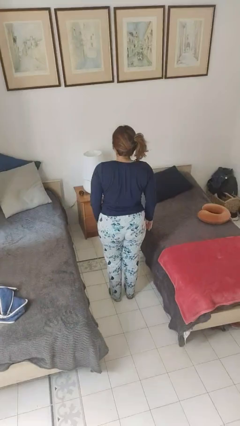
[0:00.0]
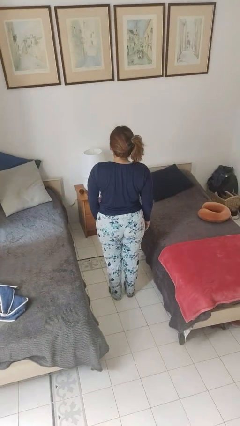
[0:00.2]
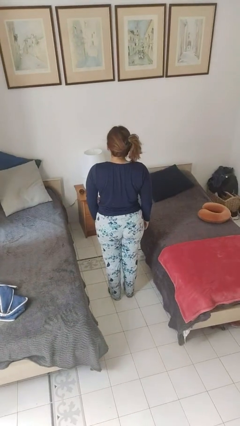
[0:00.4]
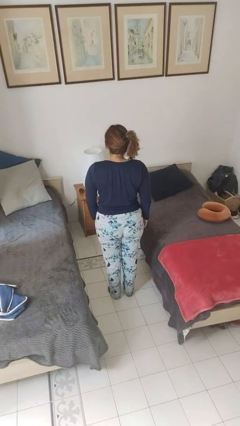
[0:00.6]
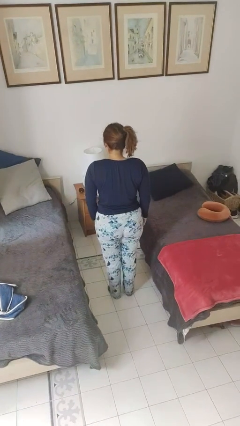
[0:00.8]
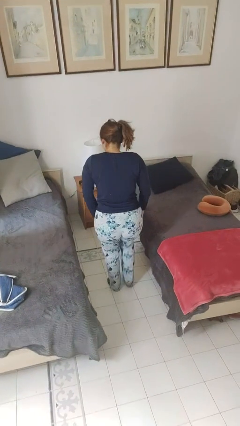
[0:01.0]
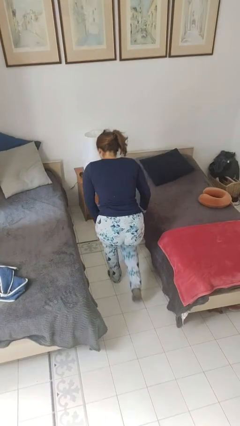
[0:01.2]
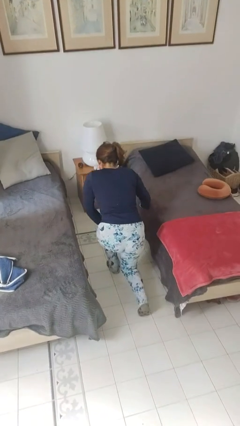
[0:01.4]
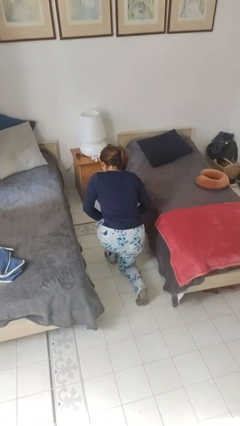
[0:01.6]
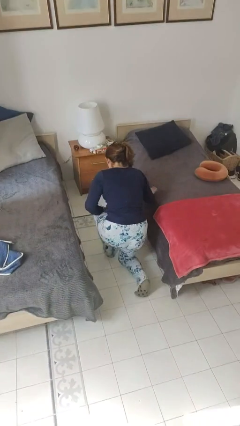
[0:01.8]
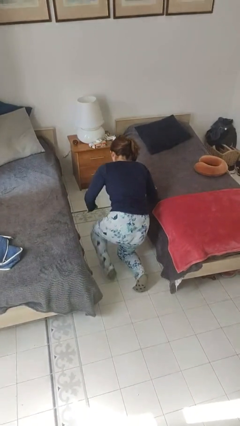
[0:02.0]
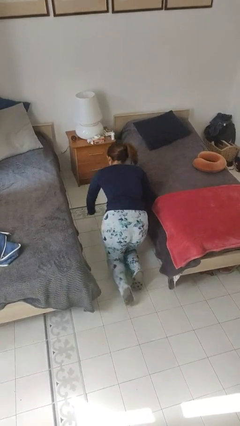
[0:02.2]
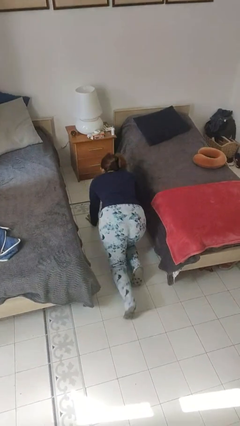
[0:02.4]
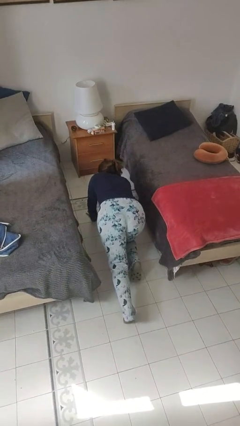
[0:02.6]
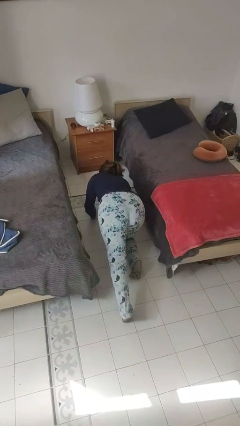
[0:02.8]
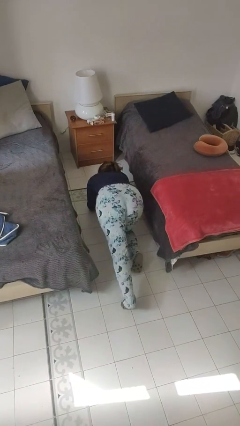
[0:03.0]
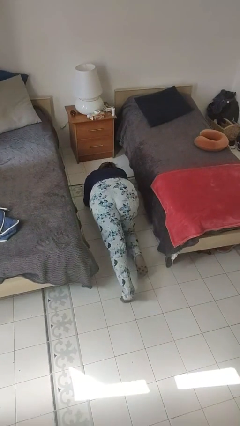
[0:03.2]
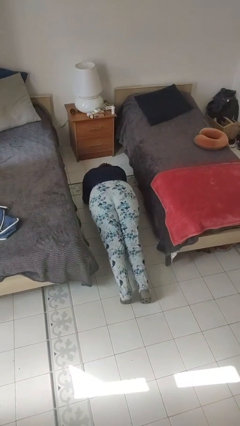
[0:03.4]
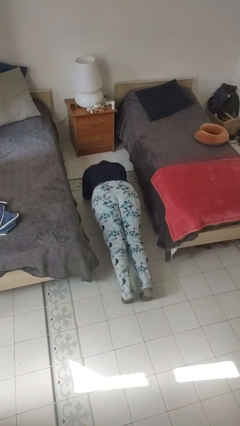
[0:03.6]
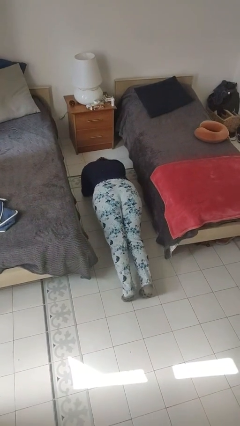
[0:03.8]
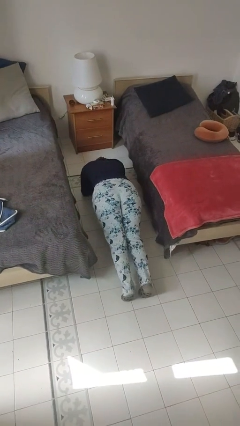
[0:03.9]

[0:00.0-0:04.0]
person exercises with plank

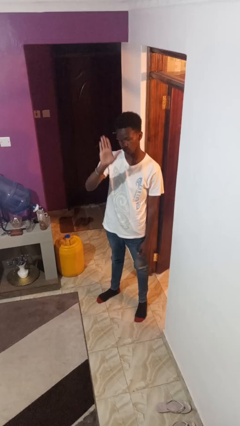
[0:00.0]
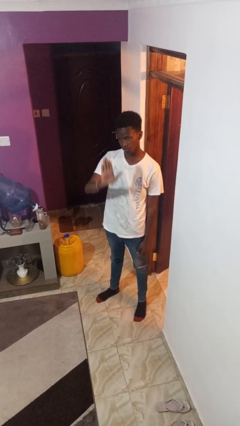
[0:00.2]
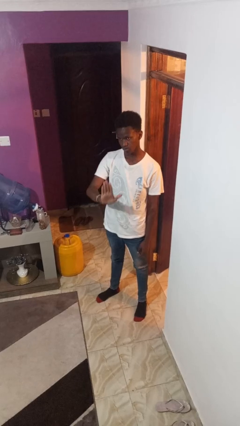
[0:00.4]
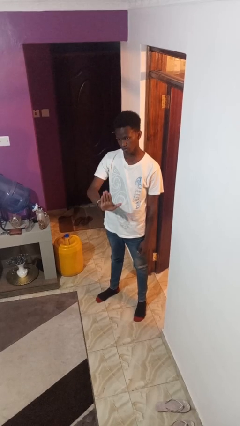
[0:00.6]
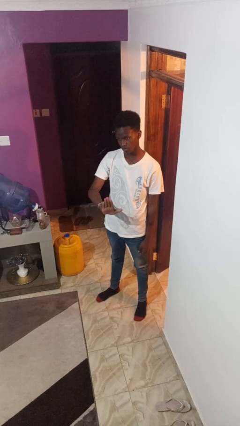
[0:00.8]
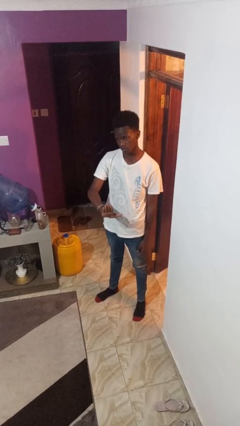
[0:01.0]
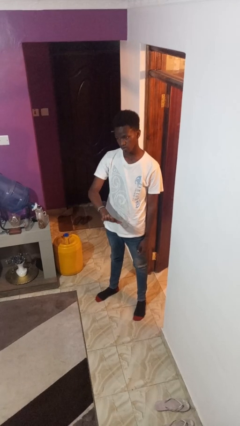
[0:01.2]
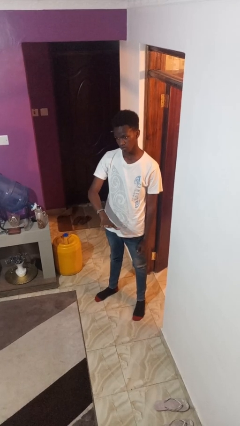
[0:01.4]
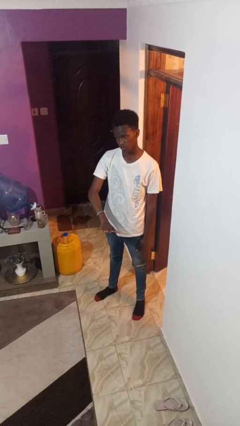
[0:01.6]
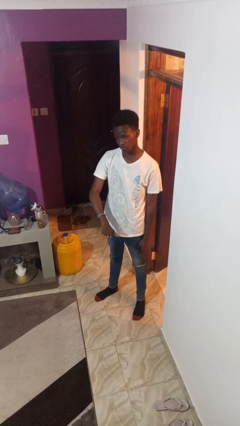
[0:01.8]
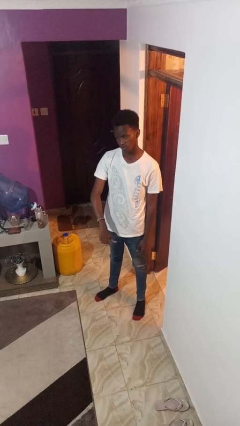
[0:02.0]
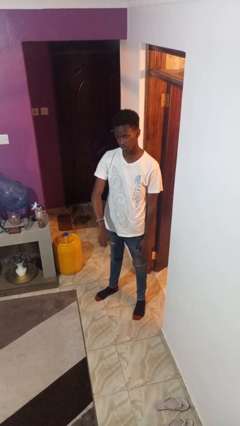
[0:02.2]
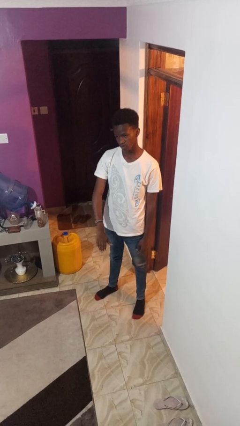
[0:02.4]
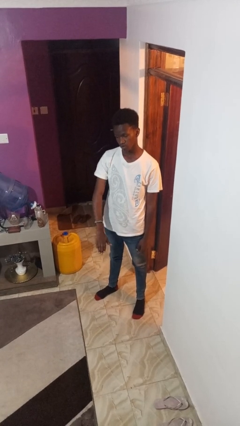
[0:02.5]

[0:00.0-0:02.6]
person gestures swipe down

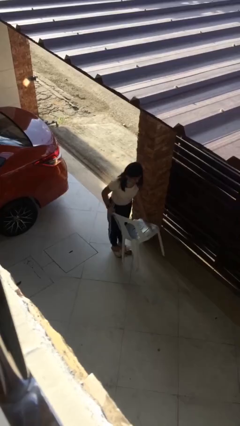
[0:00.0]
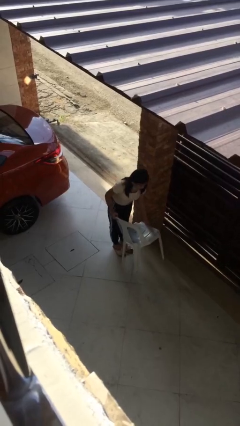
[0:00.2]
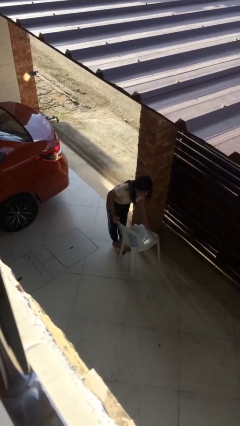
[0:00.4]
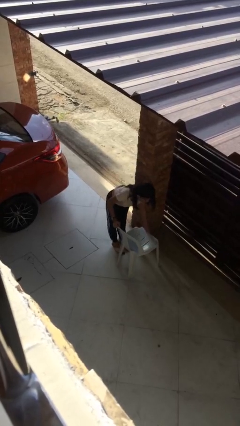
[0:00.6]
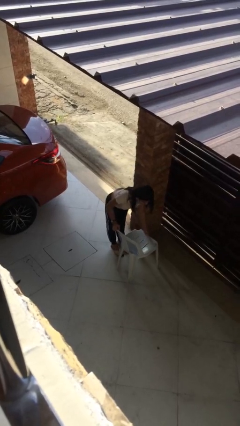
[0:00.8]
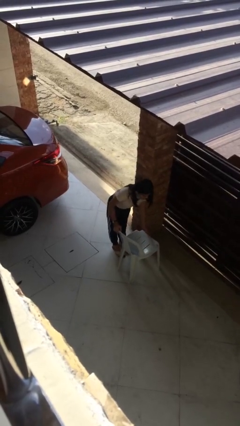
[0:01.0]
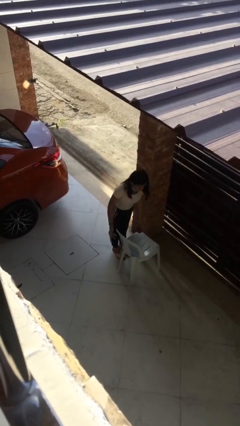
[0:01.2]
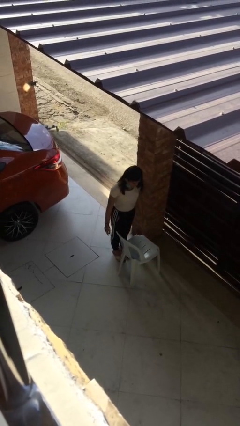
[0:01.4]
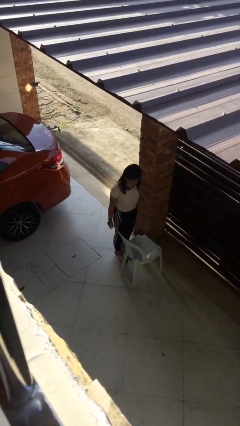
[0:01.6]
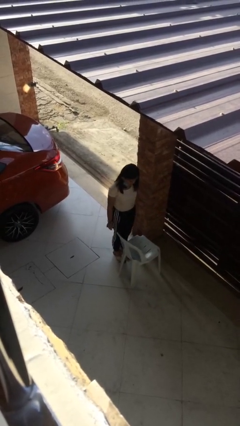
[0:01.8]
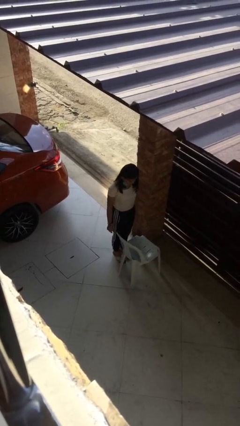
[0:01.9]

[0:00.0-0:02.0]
person puts down object on floor

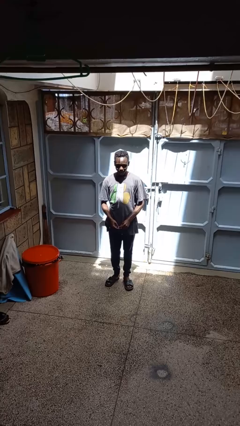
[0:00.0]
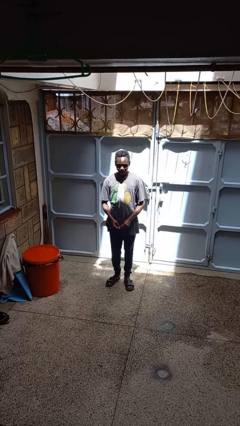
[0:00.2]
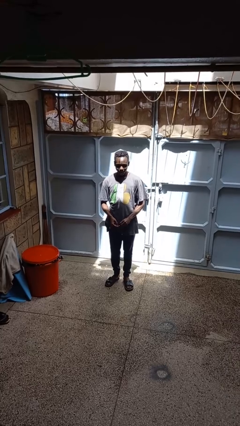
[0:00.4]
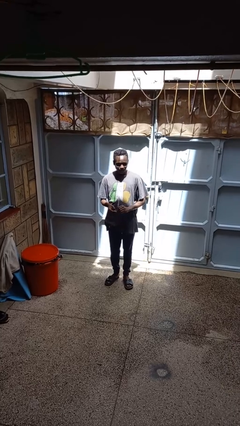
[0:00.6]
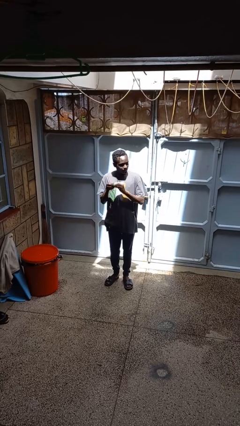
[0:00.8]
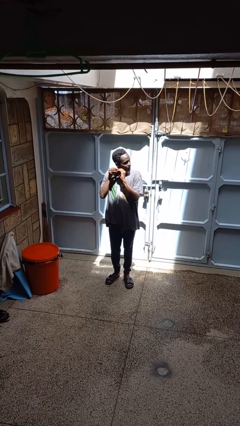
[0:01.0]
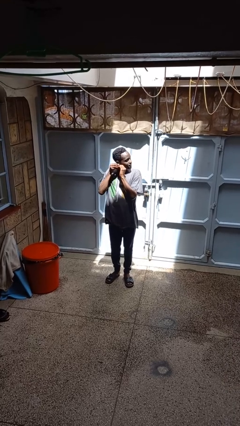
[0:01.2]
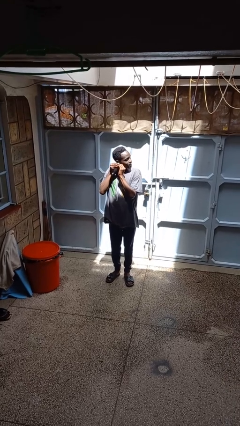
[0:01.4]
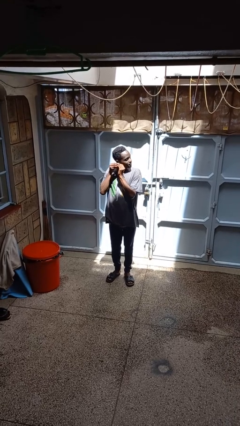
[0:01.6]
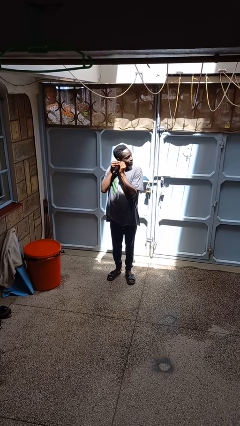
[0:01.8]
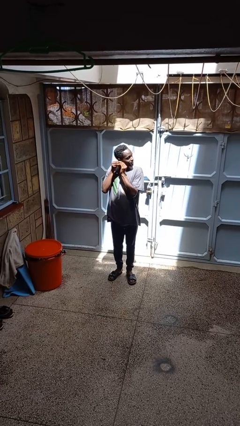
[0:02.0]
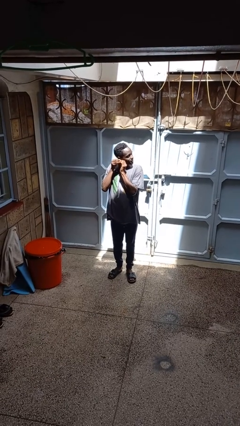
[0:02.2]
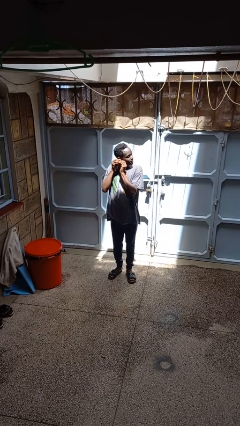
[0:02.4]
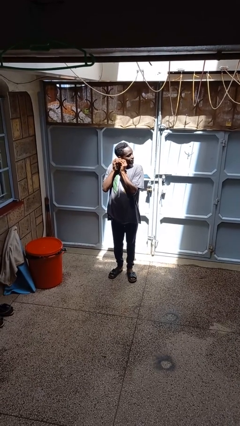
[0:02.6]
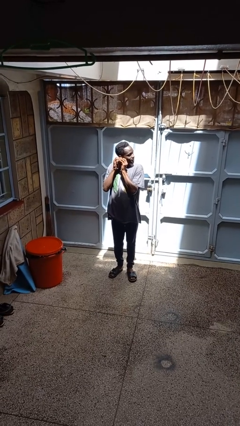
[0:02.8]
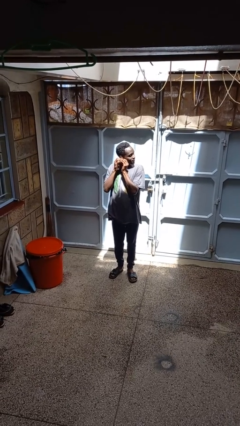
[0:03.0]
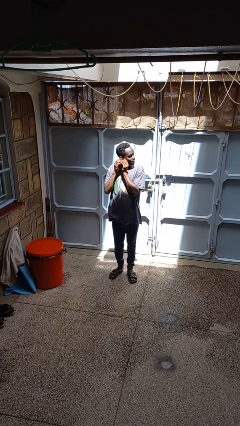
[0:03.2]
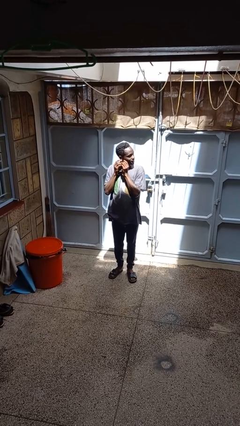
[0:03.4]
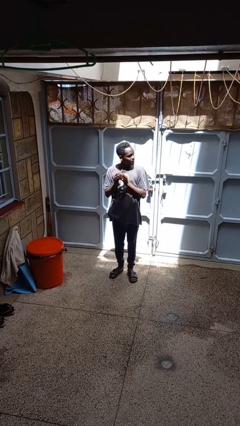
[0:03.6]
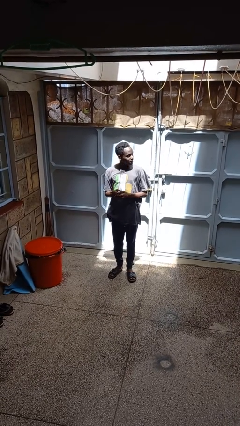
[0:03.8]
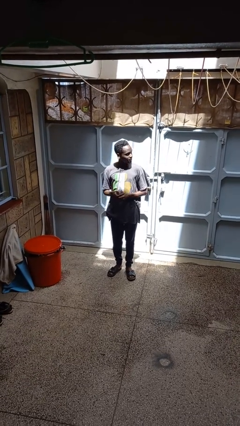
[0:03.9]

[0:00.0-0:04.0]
person puts on earrings

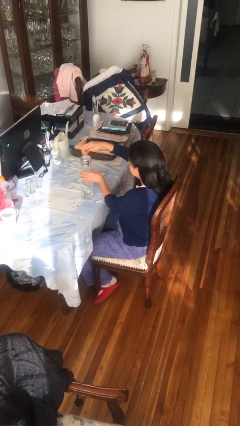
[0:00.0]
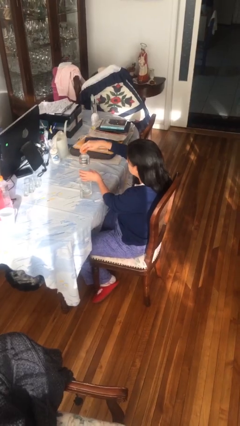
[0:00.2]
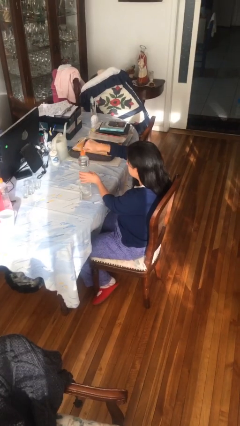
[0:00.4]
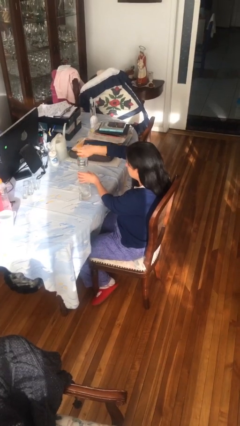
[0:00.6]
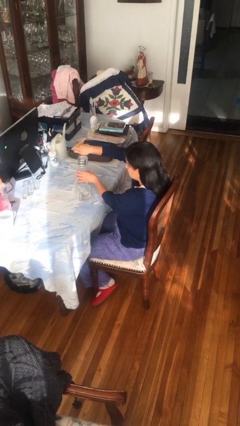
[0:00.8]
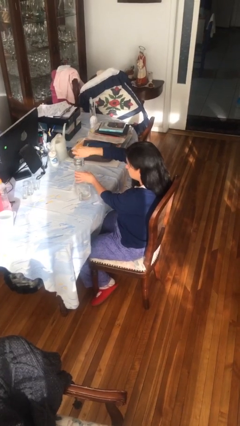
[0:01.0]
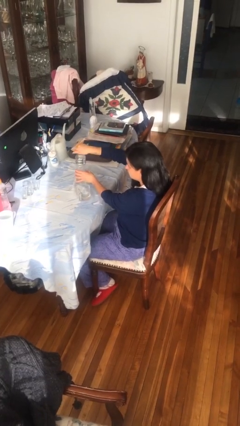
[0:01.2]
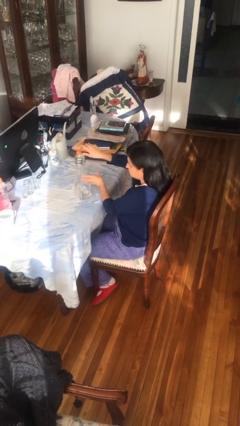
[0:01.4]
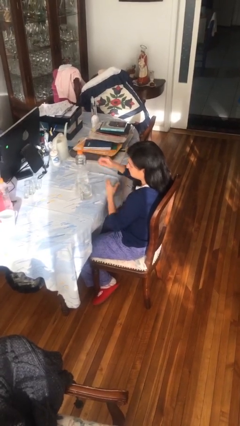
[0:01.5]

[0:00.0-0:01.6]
person screws lid to bottle

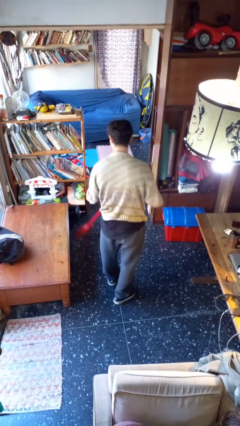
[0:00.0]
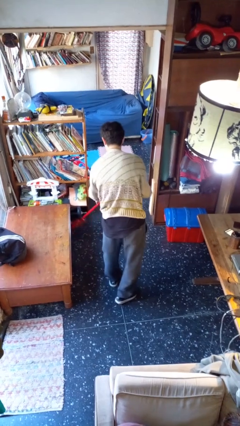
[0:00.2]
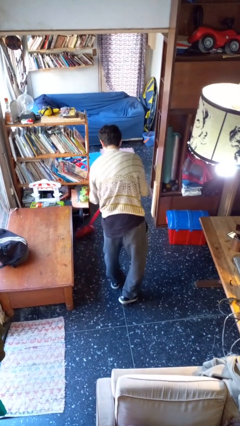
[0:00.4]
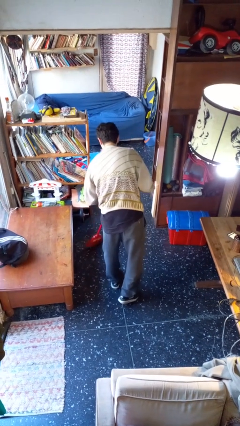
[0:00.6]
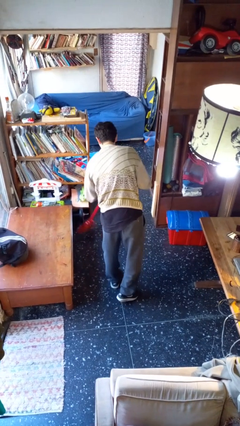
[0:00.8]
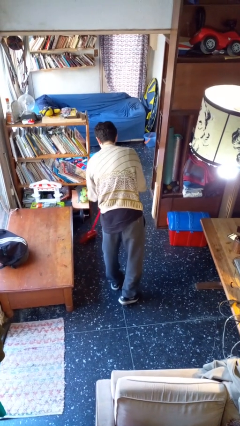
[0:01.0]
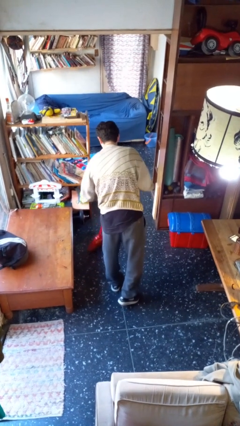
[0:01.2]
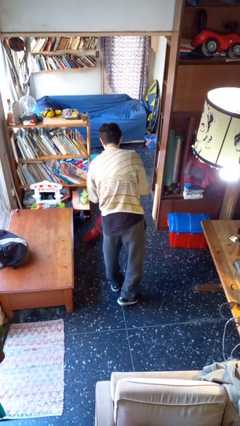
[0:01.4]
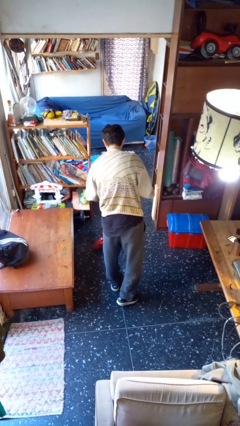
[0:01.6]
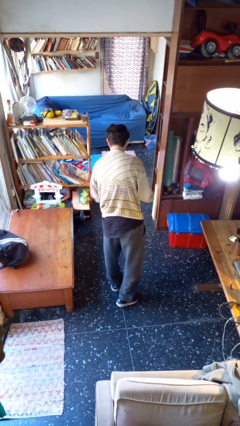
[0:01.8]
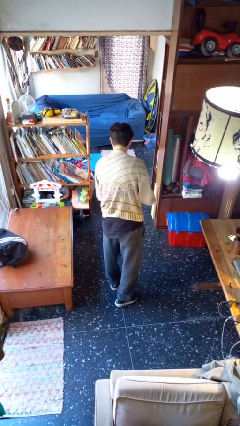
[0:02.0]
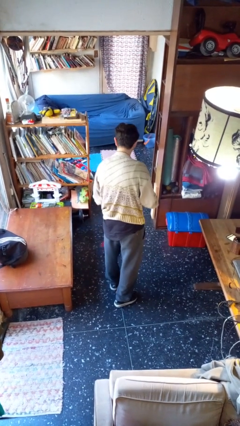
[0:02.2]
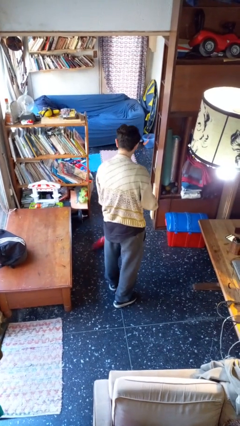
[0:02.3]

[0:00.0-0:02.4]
person sweeps floor

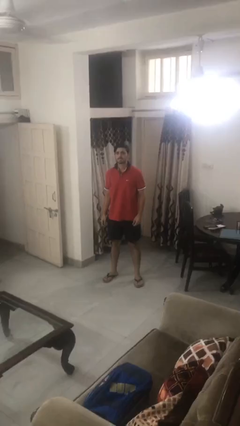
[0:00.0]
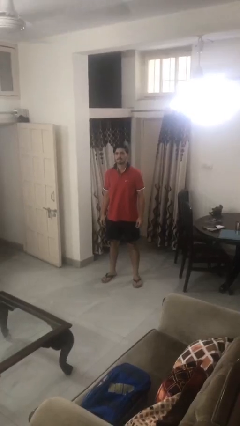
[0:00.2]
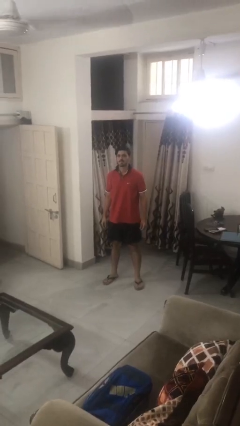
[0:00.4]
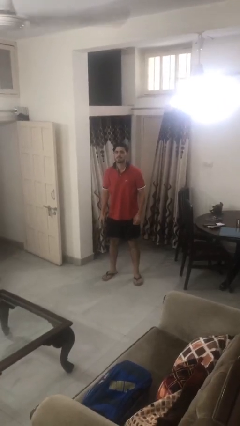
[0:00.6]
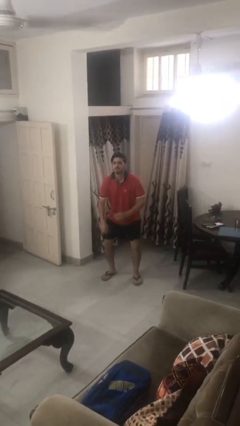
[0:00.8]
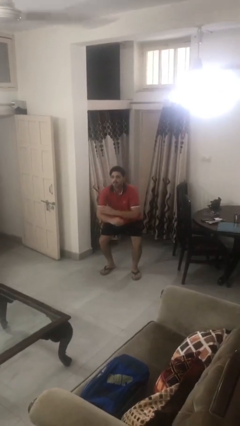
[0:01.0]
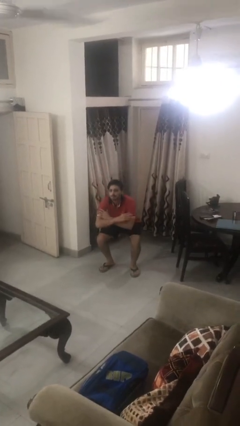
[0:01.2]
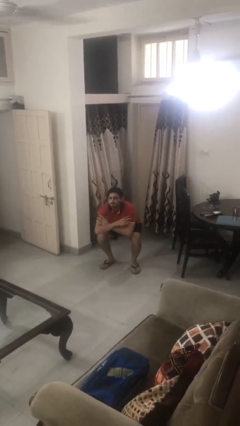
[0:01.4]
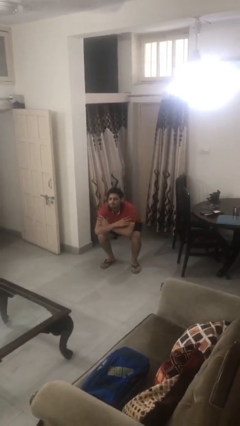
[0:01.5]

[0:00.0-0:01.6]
person squats
